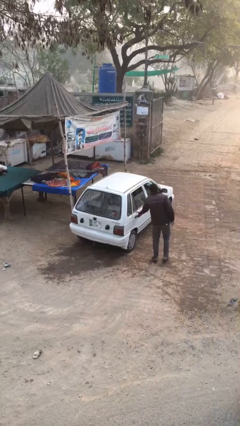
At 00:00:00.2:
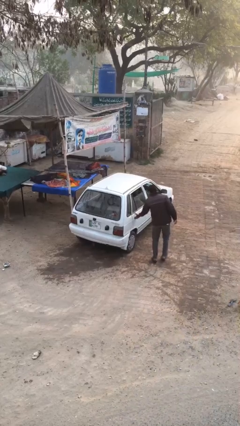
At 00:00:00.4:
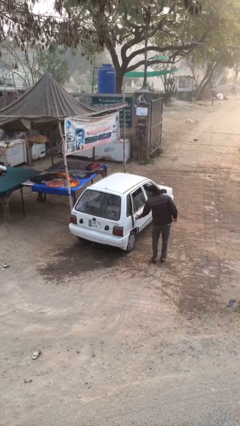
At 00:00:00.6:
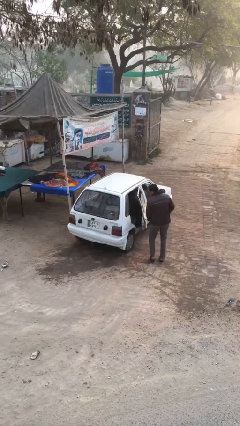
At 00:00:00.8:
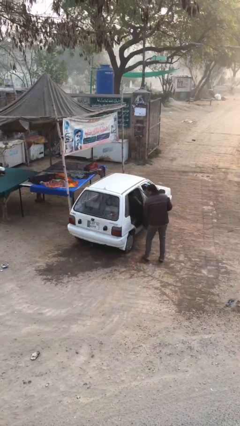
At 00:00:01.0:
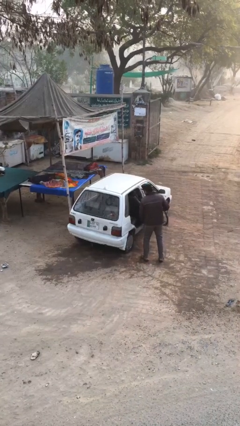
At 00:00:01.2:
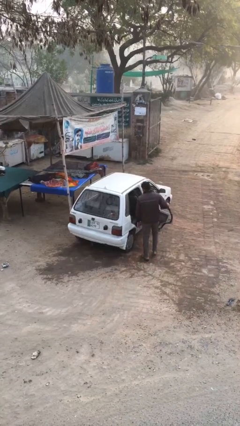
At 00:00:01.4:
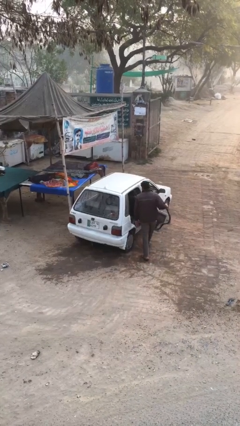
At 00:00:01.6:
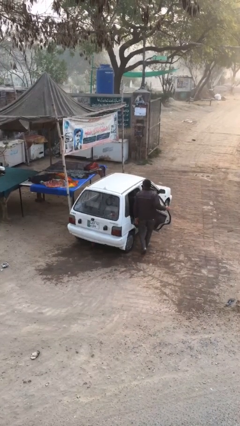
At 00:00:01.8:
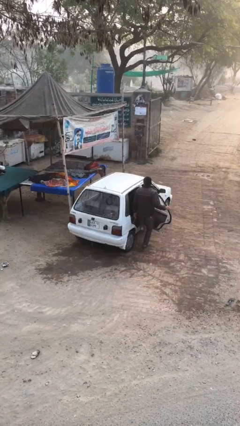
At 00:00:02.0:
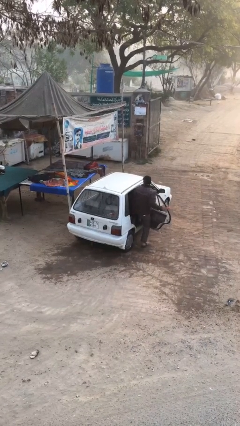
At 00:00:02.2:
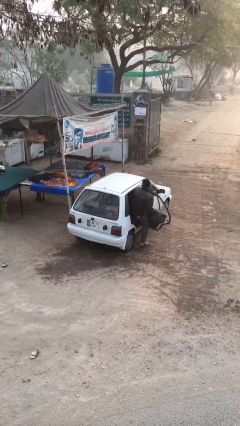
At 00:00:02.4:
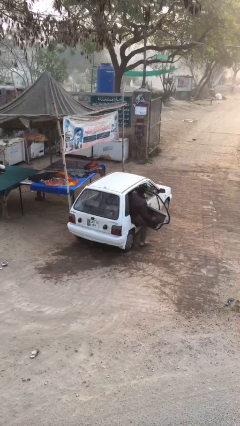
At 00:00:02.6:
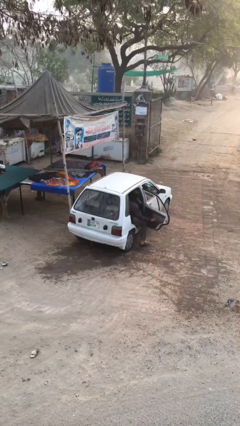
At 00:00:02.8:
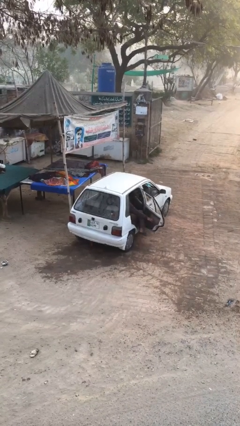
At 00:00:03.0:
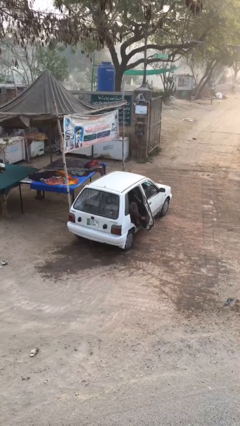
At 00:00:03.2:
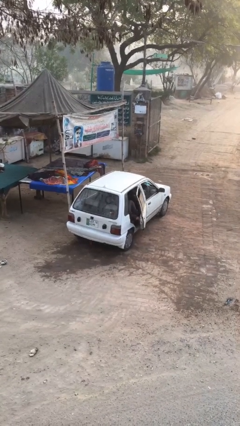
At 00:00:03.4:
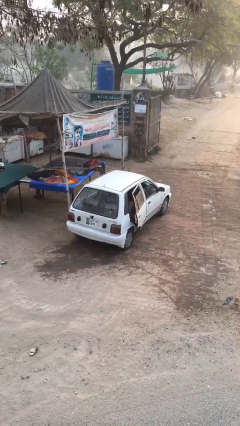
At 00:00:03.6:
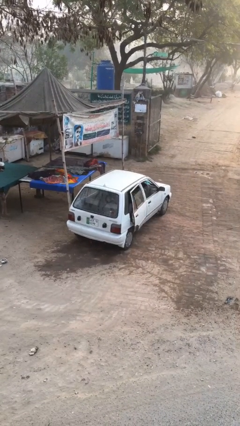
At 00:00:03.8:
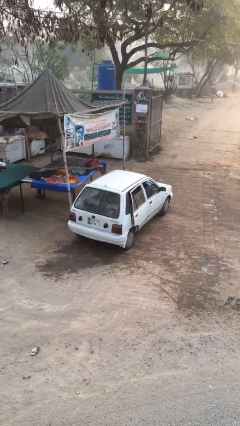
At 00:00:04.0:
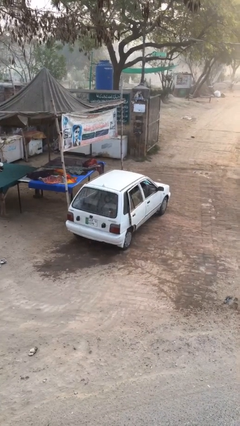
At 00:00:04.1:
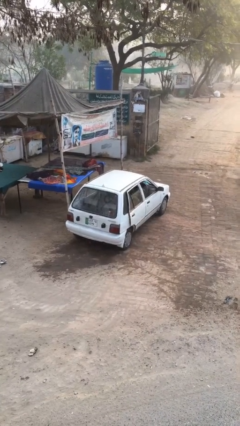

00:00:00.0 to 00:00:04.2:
car picks up person

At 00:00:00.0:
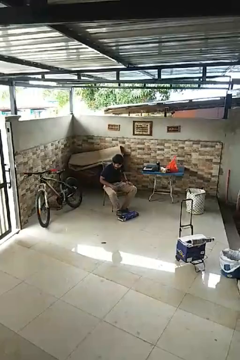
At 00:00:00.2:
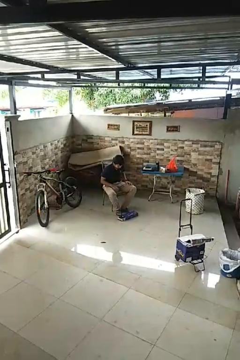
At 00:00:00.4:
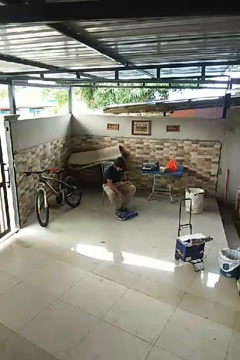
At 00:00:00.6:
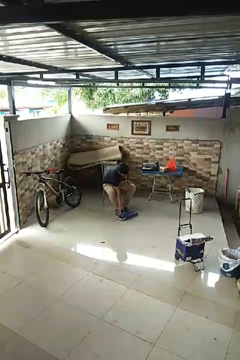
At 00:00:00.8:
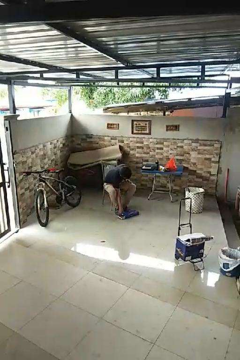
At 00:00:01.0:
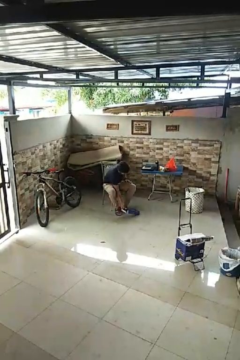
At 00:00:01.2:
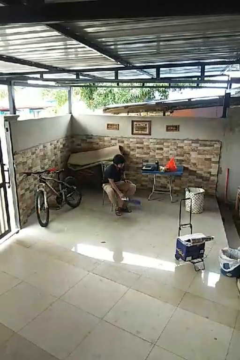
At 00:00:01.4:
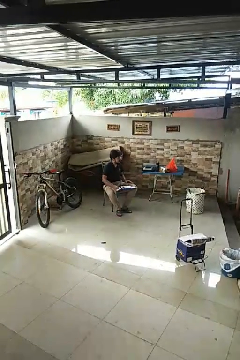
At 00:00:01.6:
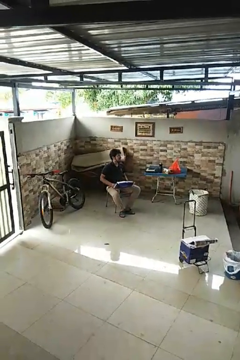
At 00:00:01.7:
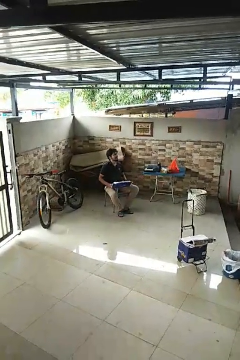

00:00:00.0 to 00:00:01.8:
person picks up object from floor

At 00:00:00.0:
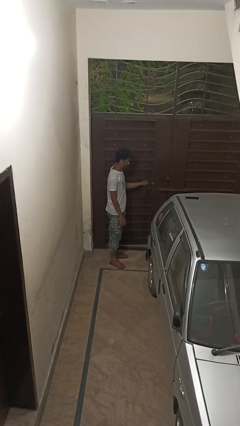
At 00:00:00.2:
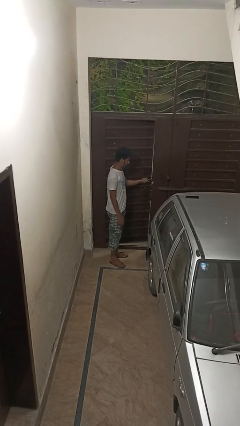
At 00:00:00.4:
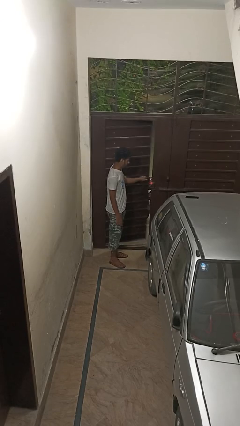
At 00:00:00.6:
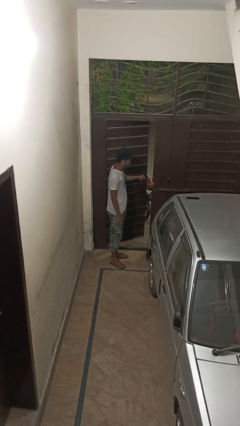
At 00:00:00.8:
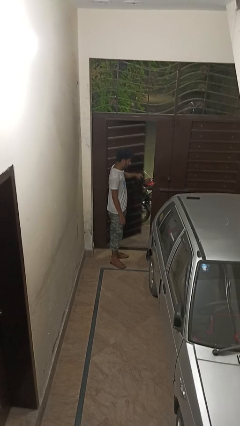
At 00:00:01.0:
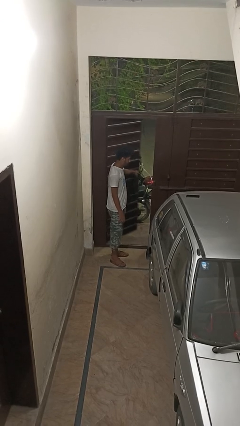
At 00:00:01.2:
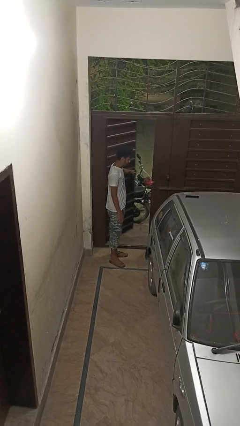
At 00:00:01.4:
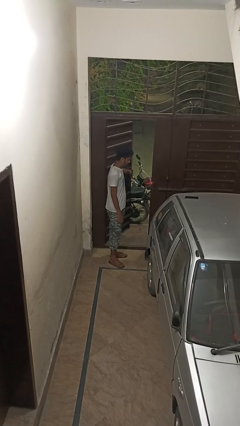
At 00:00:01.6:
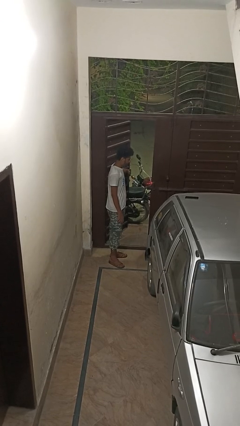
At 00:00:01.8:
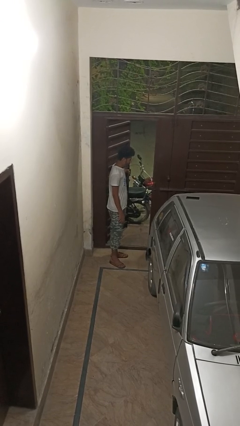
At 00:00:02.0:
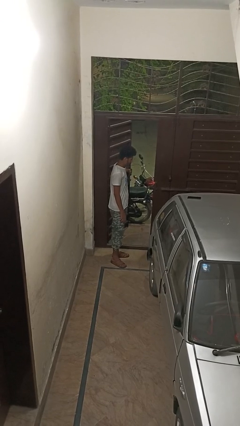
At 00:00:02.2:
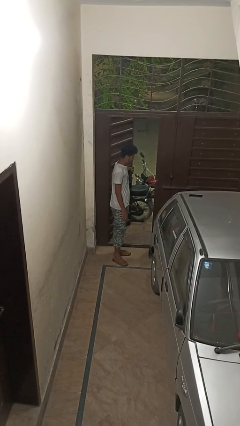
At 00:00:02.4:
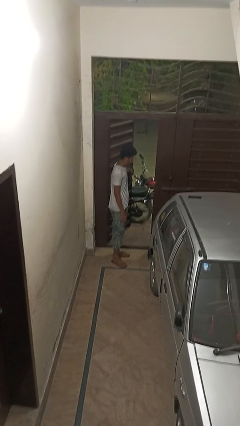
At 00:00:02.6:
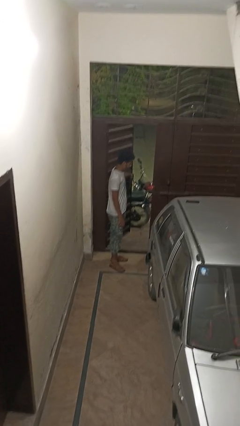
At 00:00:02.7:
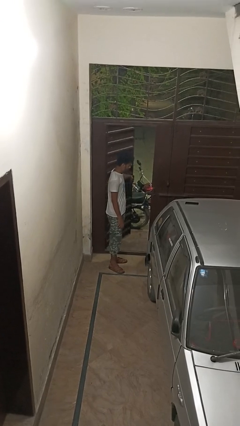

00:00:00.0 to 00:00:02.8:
person opens gate

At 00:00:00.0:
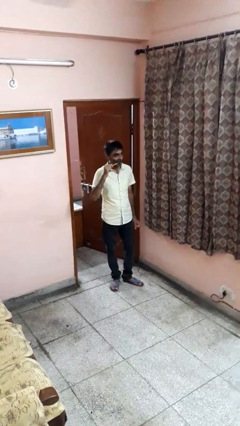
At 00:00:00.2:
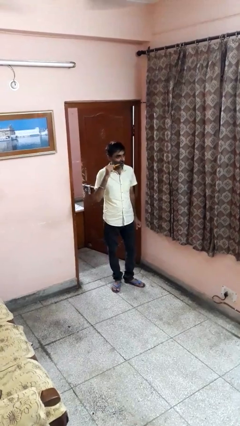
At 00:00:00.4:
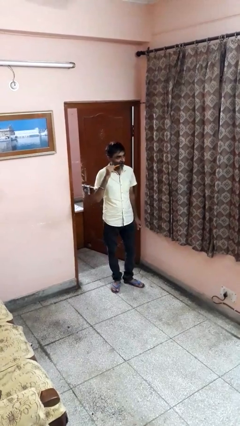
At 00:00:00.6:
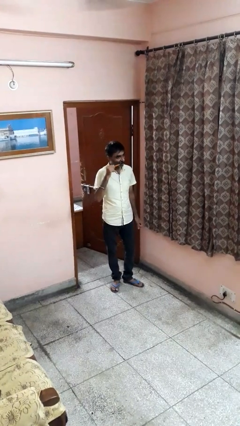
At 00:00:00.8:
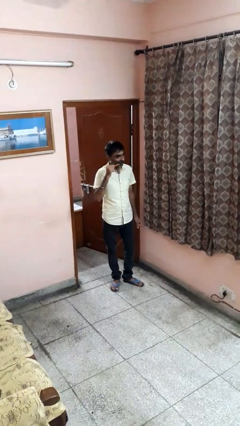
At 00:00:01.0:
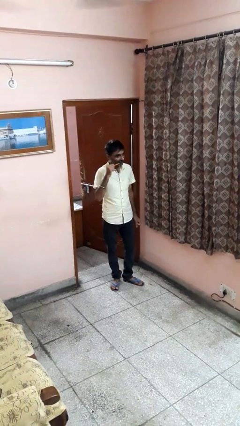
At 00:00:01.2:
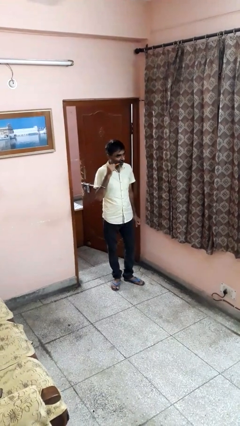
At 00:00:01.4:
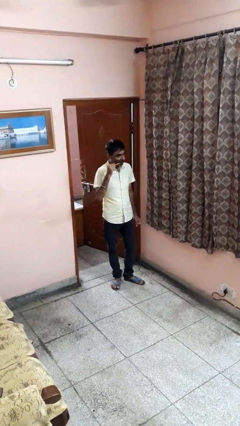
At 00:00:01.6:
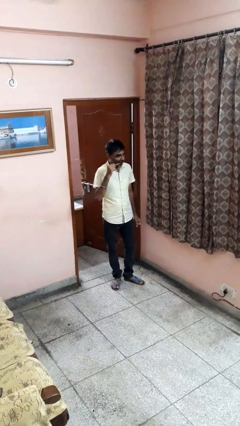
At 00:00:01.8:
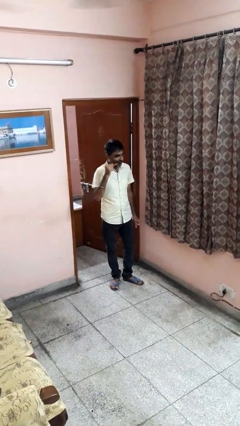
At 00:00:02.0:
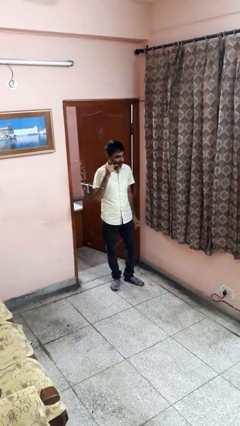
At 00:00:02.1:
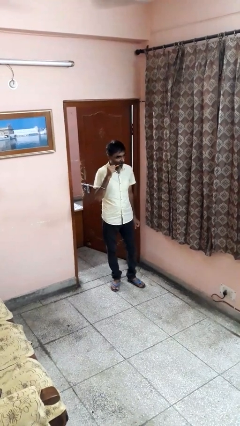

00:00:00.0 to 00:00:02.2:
person brushes teeth

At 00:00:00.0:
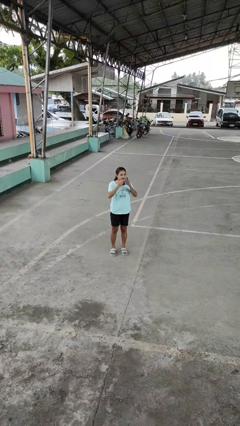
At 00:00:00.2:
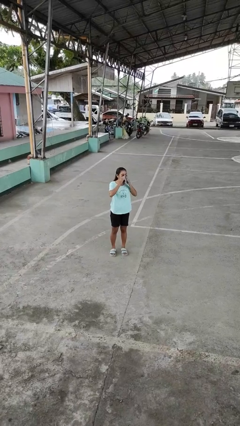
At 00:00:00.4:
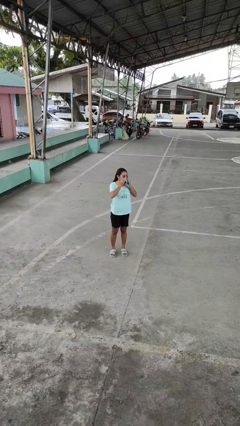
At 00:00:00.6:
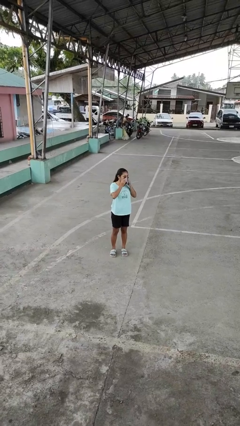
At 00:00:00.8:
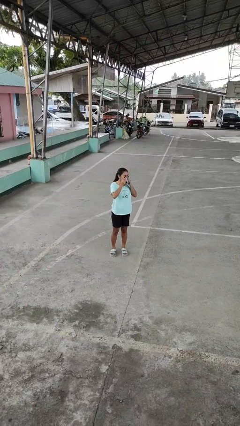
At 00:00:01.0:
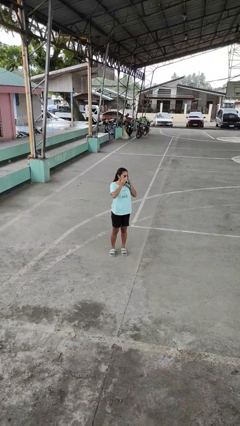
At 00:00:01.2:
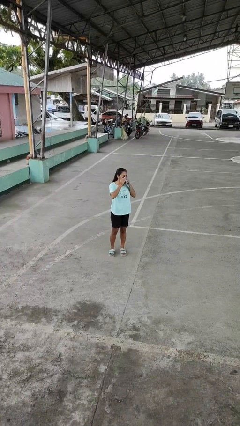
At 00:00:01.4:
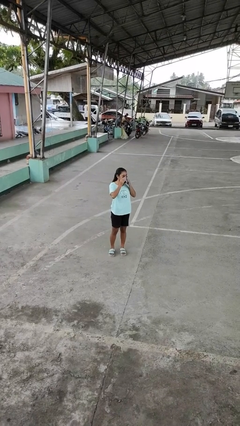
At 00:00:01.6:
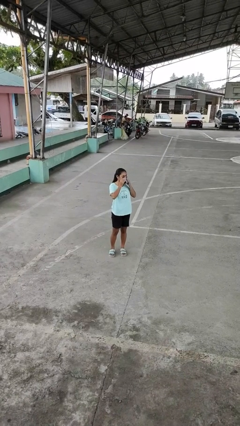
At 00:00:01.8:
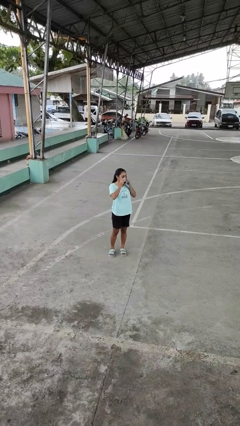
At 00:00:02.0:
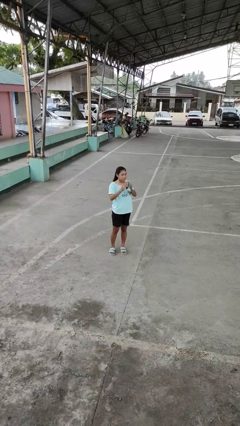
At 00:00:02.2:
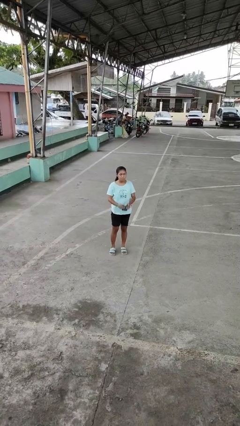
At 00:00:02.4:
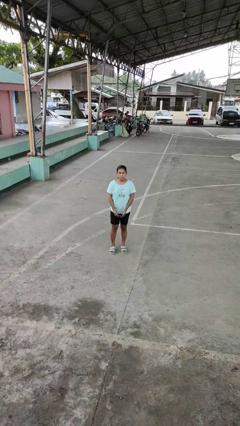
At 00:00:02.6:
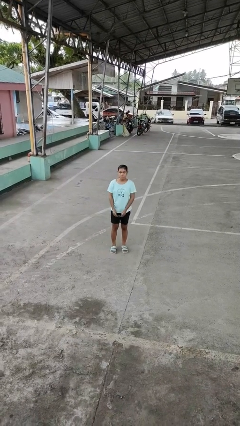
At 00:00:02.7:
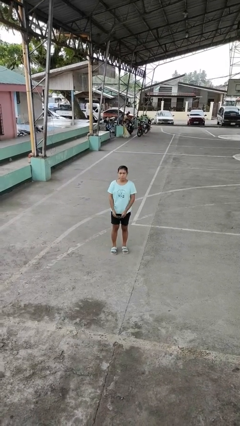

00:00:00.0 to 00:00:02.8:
person blows nose

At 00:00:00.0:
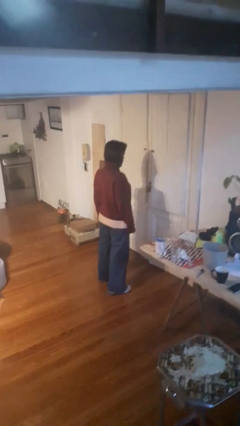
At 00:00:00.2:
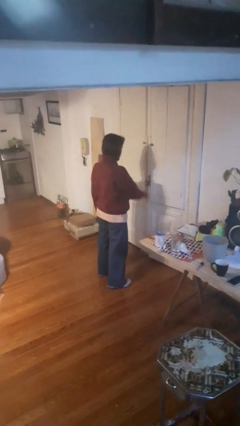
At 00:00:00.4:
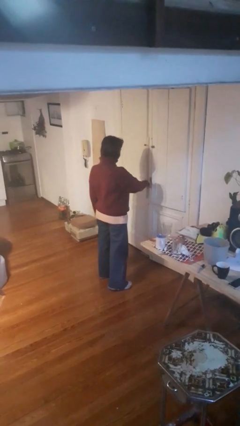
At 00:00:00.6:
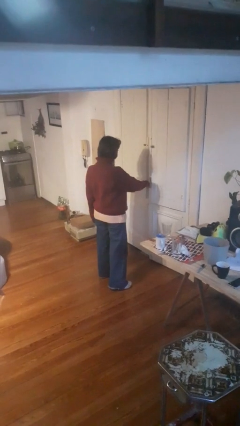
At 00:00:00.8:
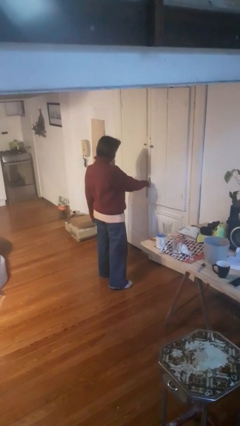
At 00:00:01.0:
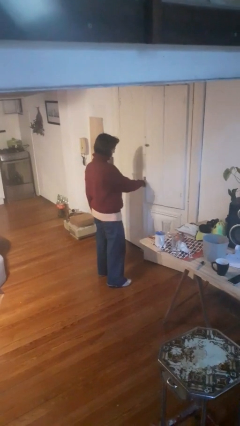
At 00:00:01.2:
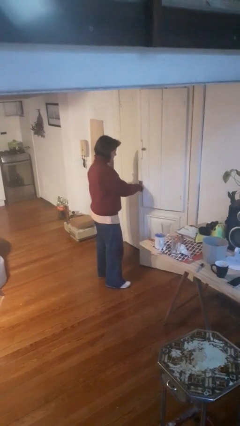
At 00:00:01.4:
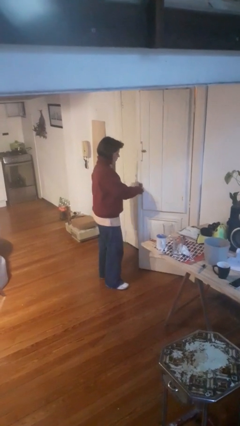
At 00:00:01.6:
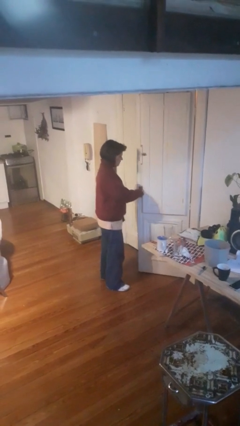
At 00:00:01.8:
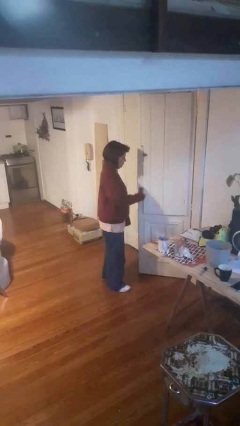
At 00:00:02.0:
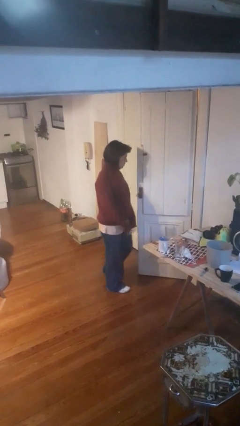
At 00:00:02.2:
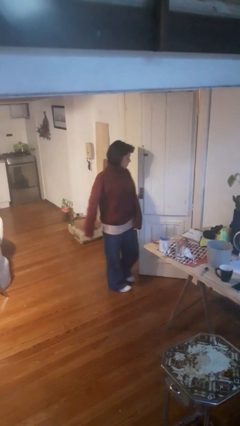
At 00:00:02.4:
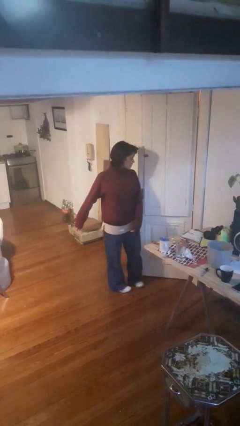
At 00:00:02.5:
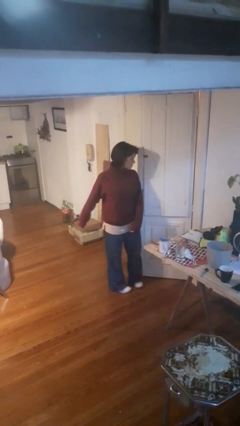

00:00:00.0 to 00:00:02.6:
person opens facility door

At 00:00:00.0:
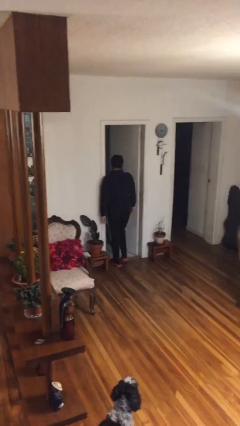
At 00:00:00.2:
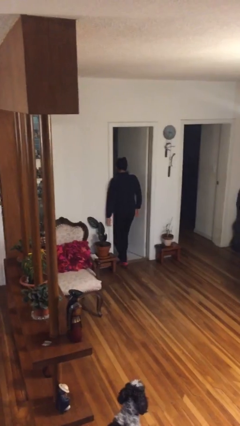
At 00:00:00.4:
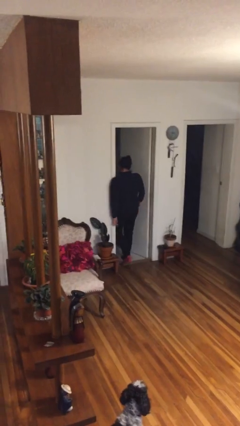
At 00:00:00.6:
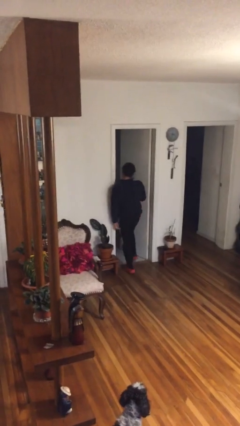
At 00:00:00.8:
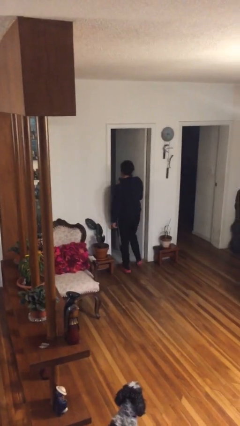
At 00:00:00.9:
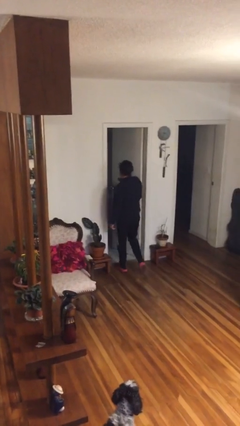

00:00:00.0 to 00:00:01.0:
person bumps into wall
